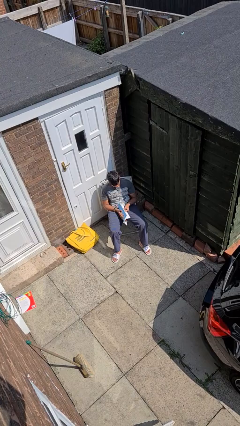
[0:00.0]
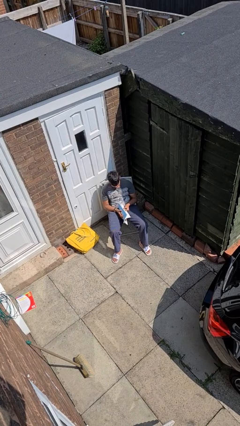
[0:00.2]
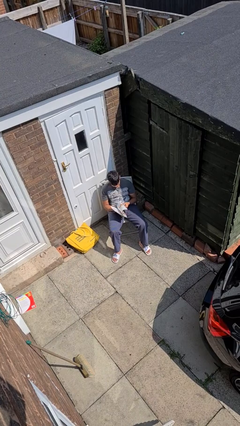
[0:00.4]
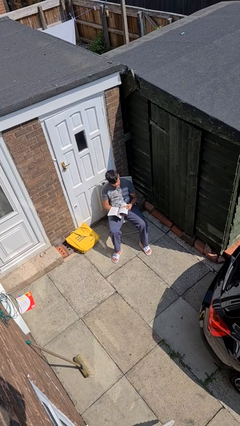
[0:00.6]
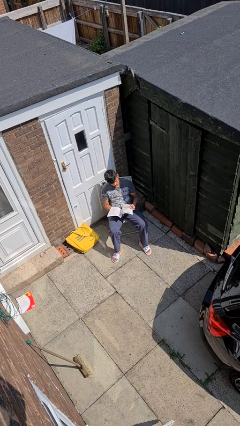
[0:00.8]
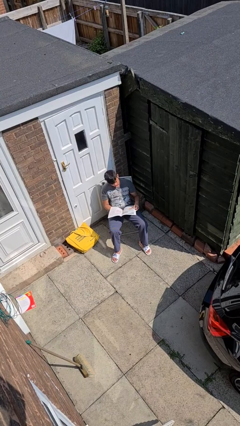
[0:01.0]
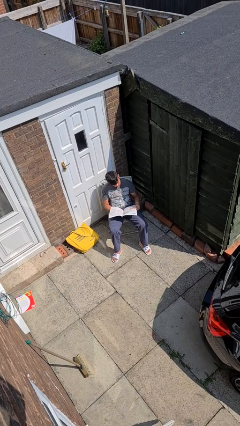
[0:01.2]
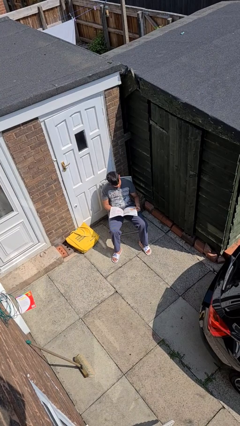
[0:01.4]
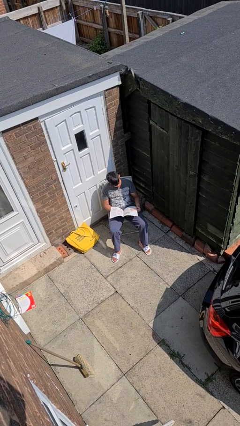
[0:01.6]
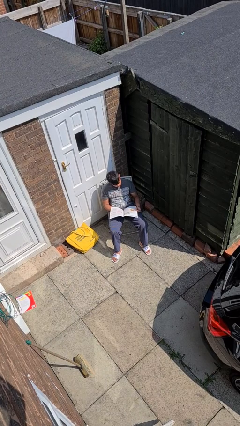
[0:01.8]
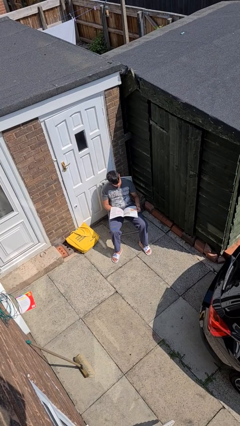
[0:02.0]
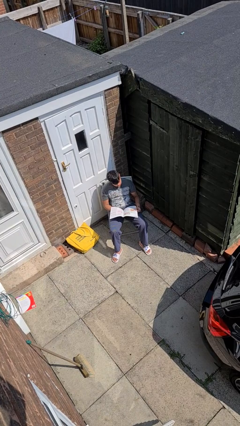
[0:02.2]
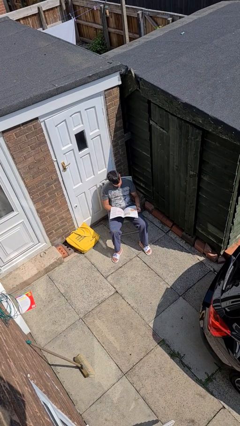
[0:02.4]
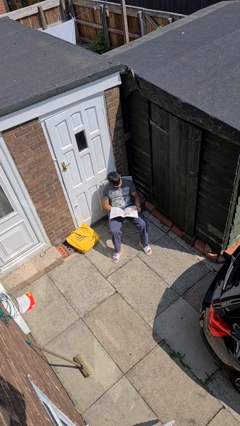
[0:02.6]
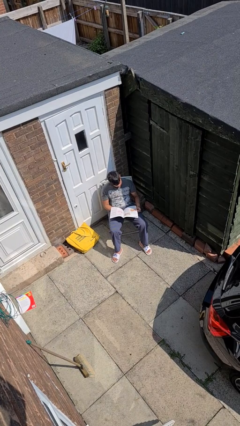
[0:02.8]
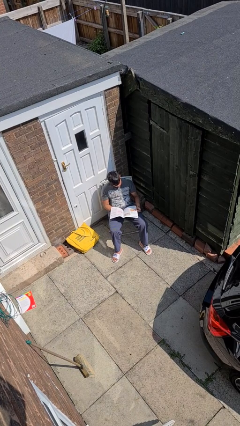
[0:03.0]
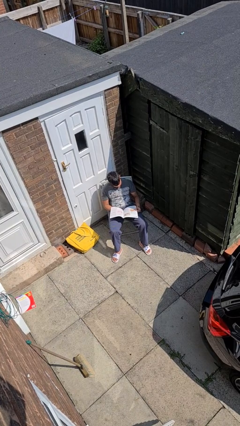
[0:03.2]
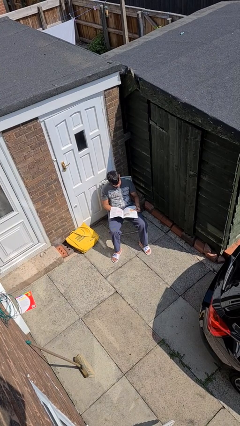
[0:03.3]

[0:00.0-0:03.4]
person reads newspaper

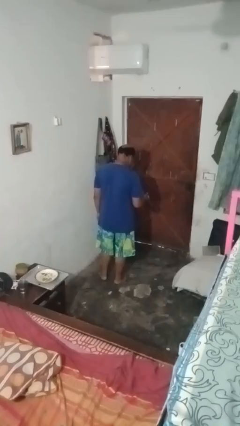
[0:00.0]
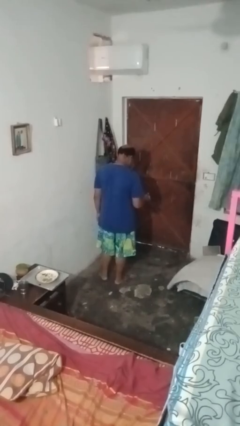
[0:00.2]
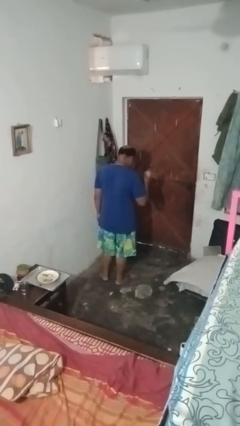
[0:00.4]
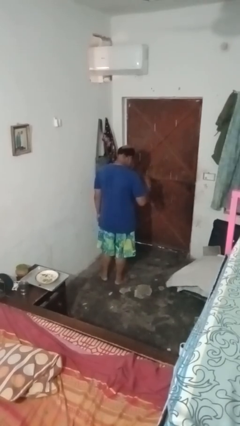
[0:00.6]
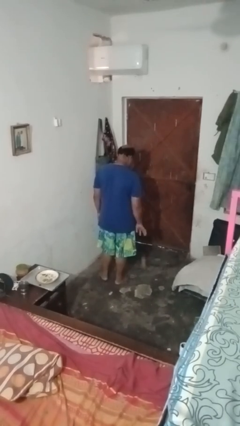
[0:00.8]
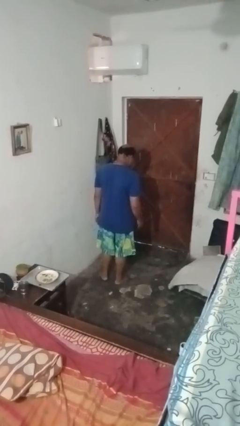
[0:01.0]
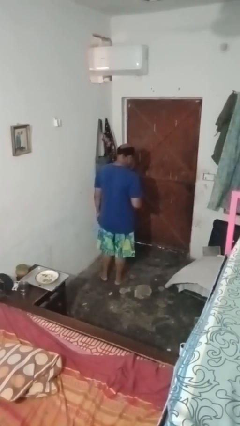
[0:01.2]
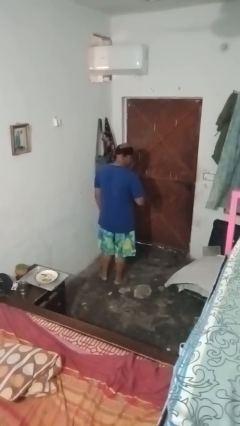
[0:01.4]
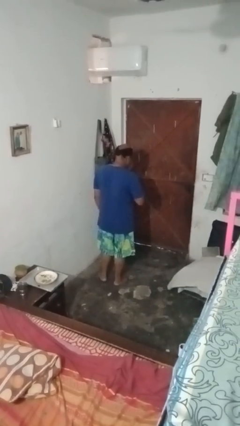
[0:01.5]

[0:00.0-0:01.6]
person bounces ball on floor

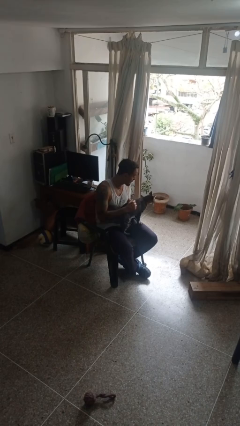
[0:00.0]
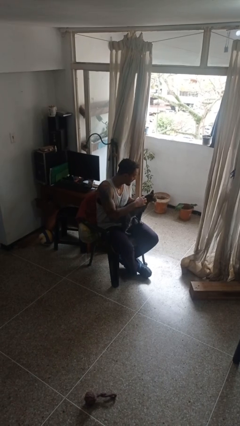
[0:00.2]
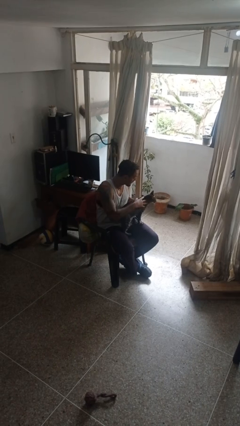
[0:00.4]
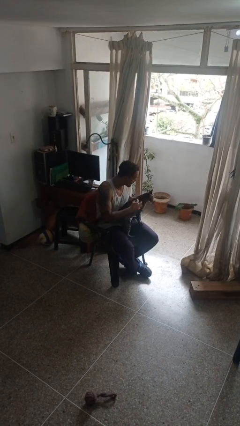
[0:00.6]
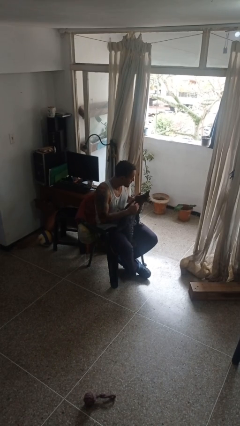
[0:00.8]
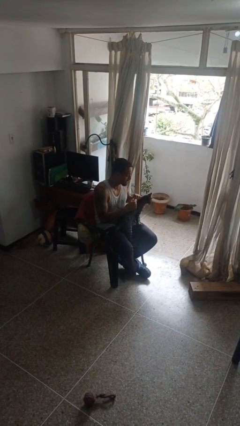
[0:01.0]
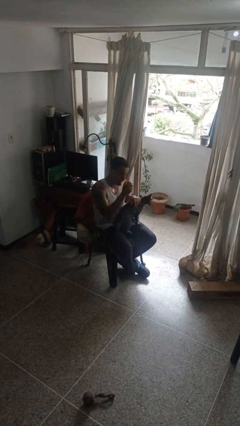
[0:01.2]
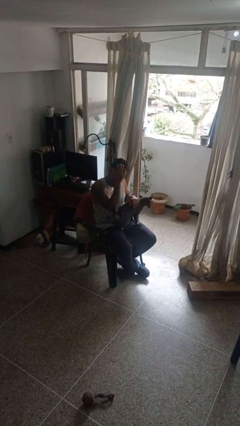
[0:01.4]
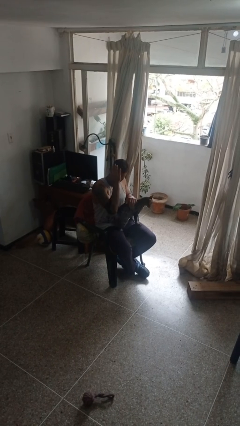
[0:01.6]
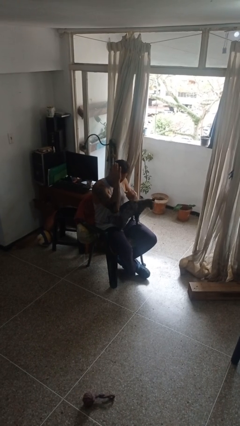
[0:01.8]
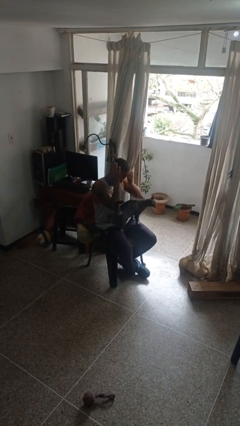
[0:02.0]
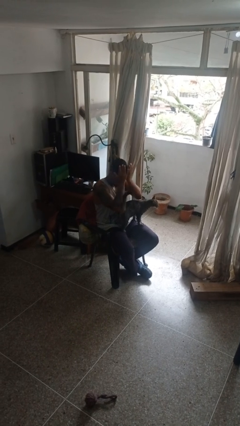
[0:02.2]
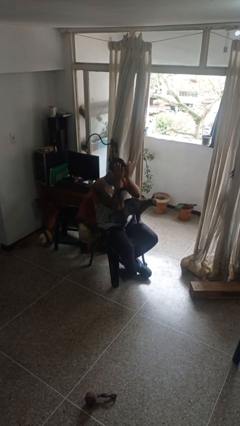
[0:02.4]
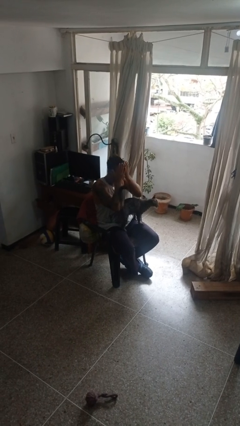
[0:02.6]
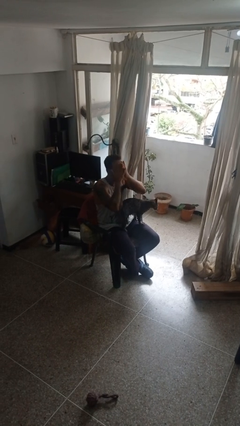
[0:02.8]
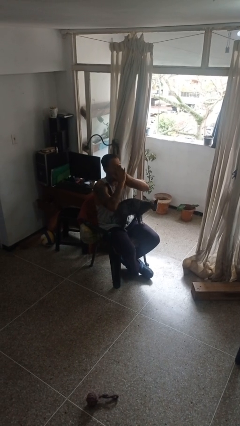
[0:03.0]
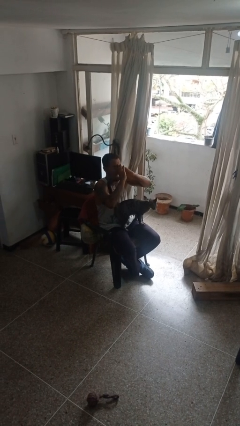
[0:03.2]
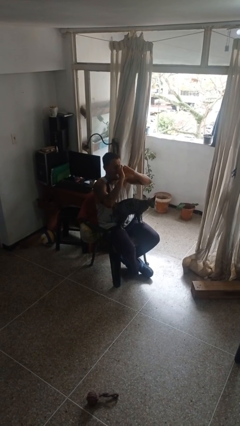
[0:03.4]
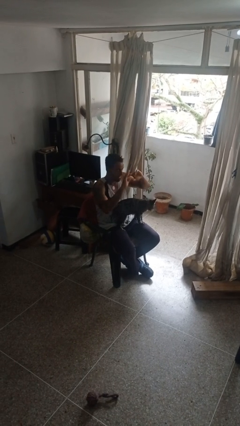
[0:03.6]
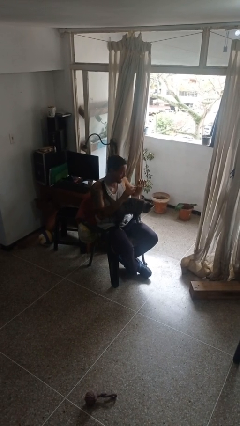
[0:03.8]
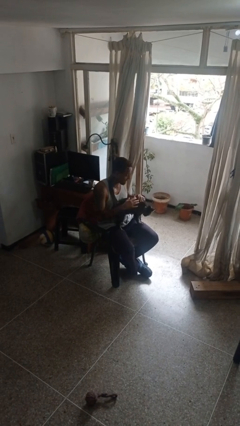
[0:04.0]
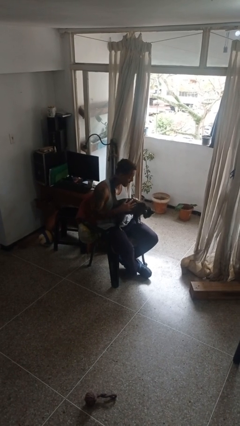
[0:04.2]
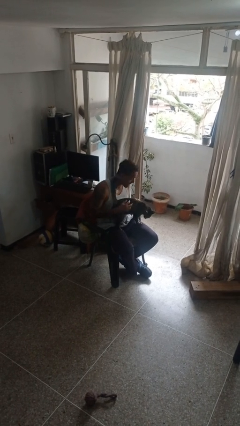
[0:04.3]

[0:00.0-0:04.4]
person rubs eyes

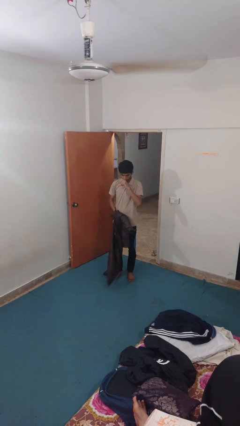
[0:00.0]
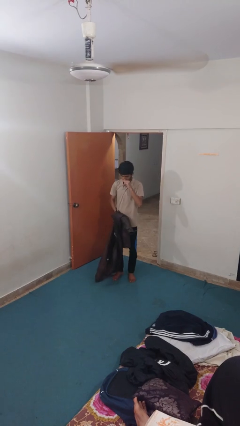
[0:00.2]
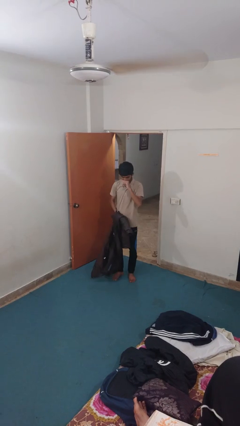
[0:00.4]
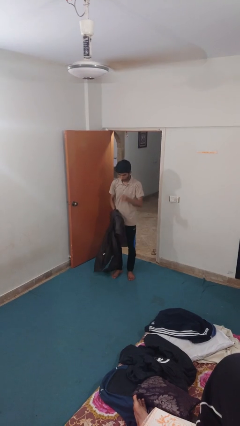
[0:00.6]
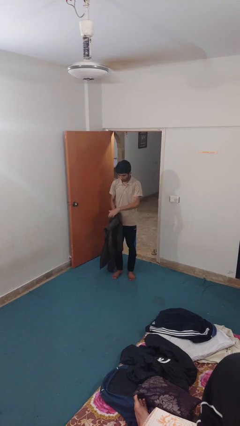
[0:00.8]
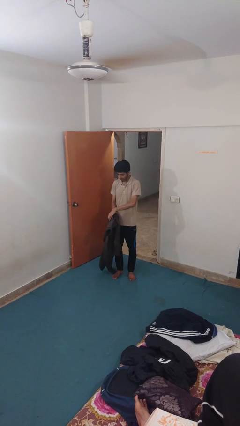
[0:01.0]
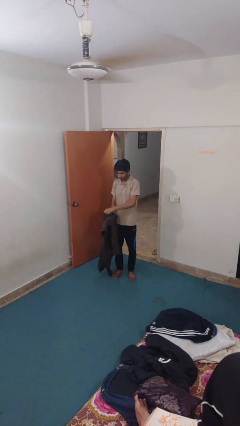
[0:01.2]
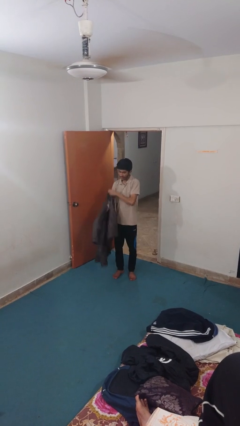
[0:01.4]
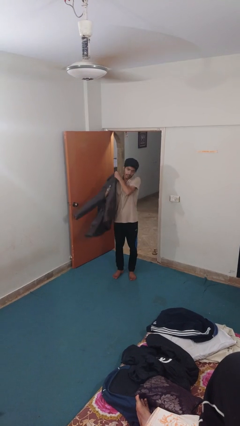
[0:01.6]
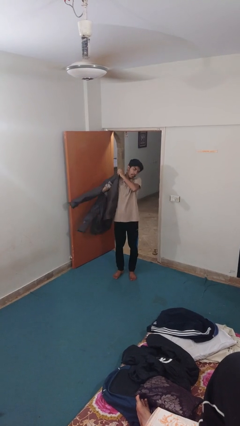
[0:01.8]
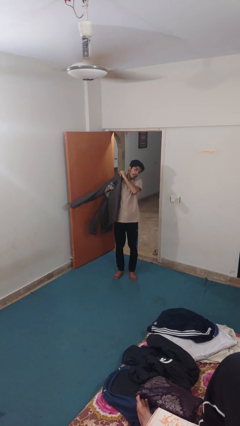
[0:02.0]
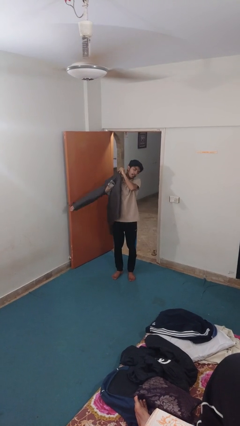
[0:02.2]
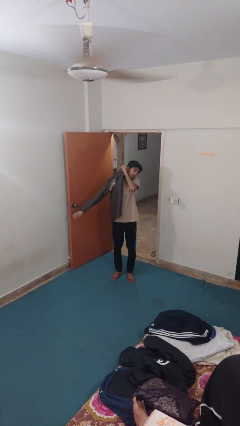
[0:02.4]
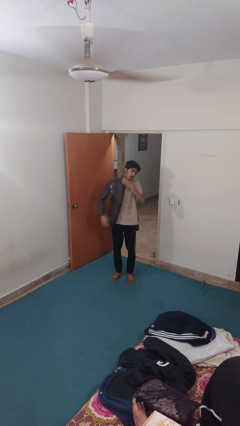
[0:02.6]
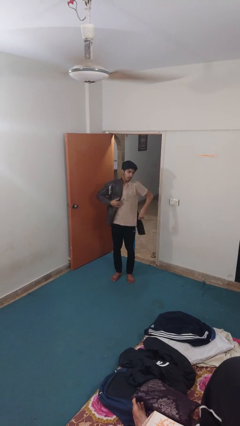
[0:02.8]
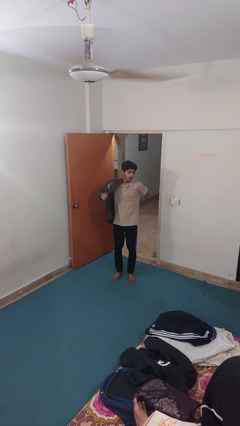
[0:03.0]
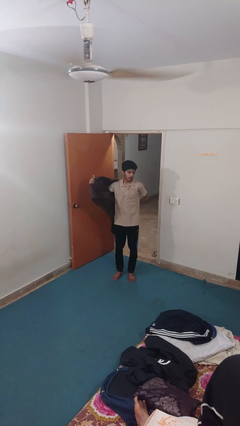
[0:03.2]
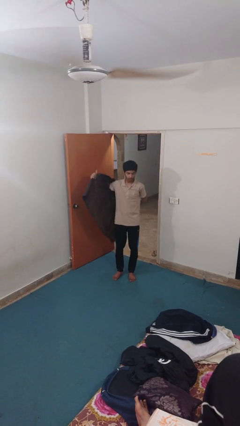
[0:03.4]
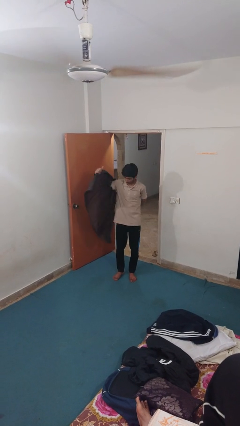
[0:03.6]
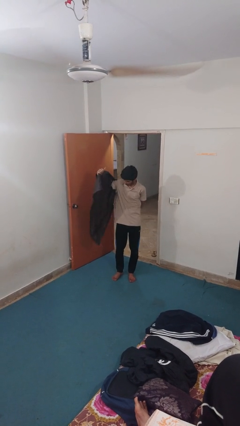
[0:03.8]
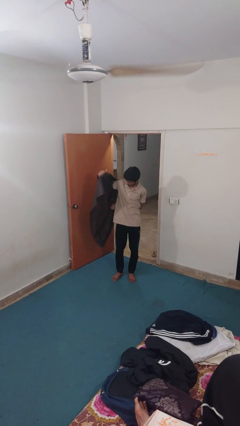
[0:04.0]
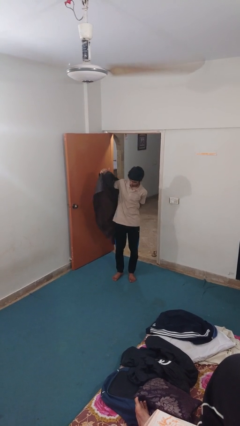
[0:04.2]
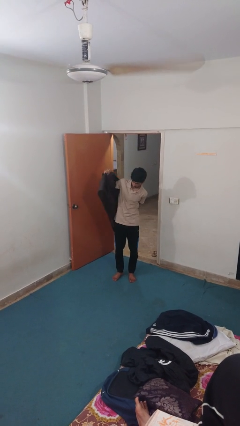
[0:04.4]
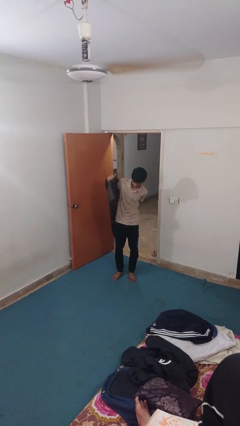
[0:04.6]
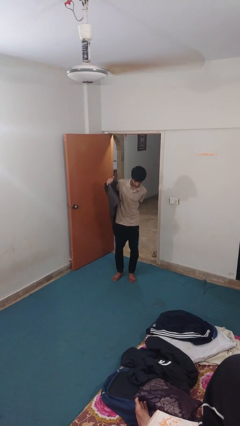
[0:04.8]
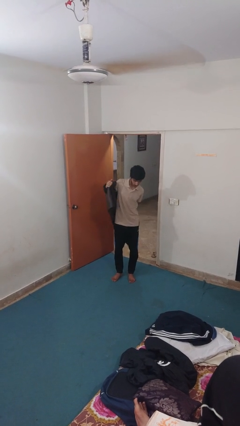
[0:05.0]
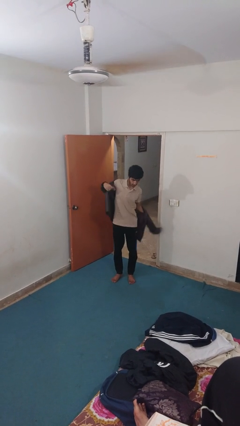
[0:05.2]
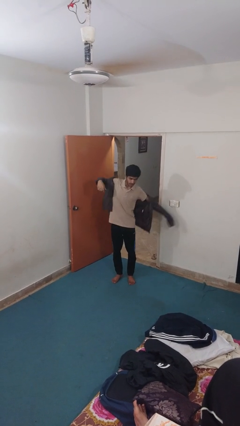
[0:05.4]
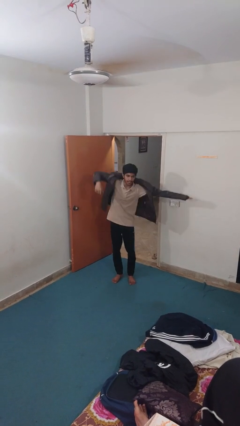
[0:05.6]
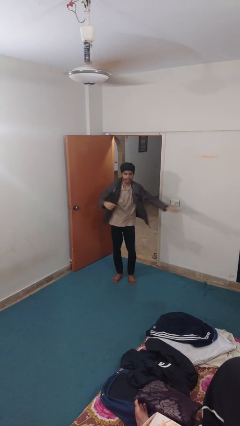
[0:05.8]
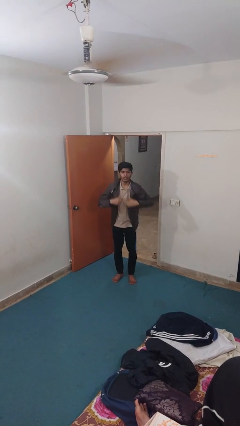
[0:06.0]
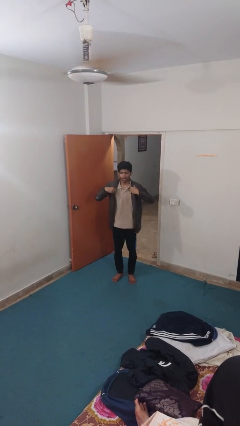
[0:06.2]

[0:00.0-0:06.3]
person puts on jacket

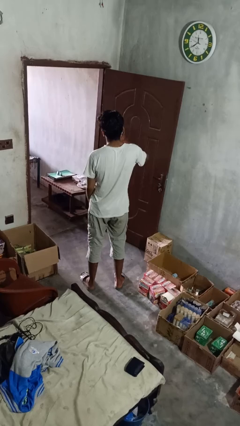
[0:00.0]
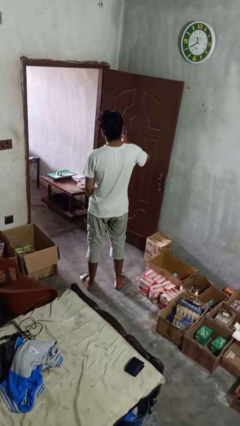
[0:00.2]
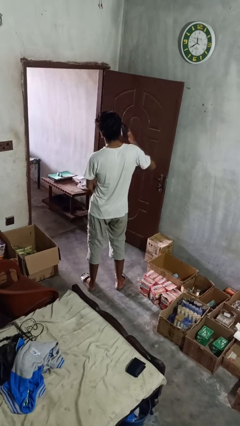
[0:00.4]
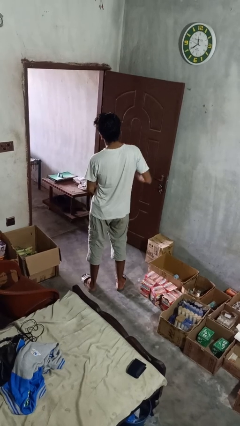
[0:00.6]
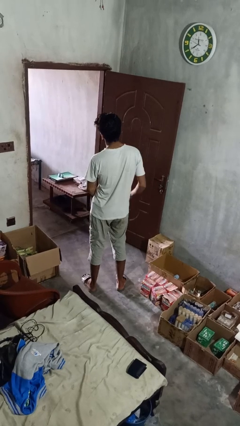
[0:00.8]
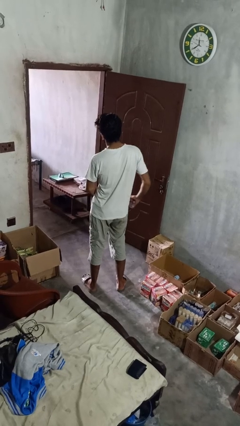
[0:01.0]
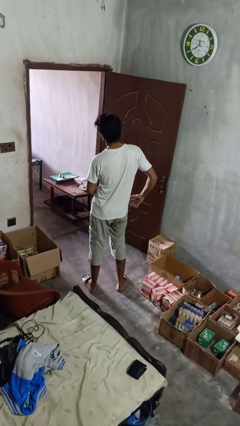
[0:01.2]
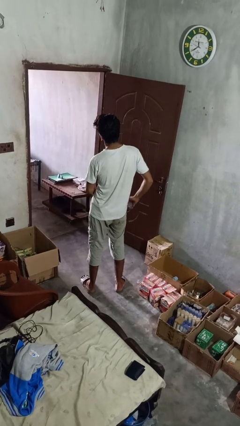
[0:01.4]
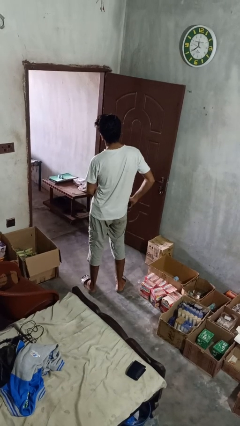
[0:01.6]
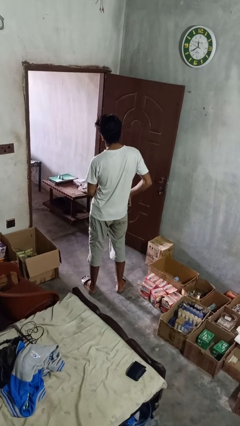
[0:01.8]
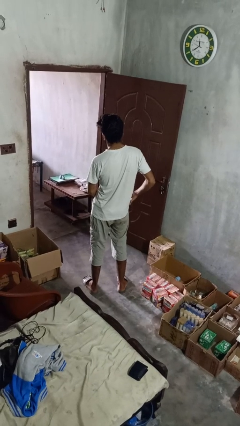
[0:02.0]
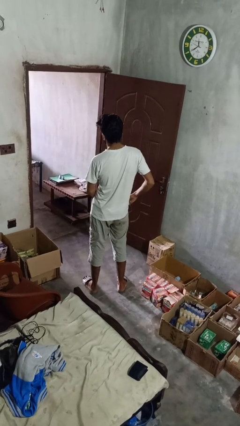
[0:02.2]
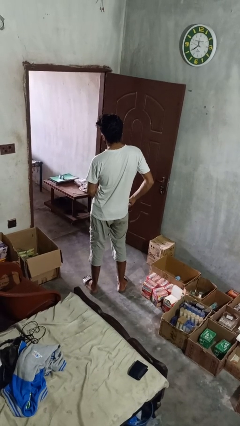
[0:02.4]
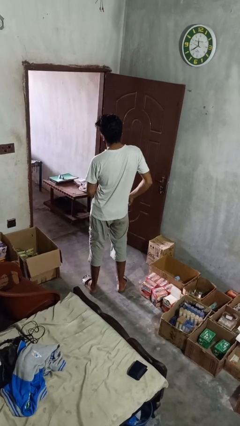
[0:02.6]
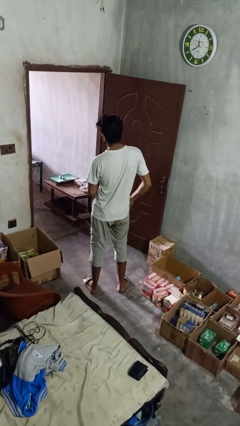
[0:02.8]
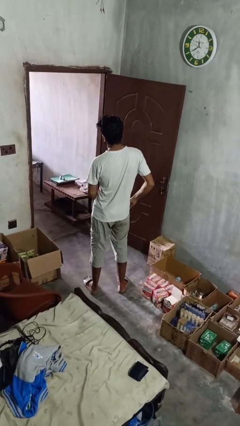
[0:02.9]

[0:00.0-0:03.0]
person puts phone into pocket
